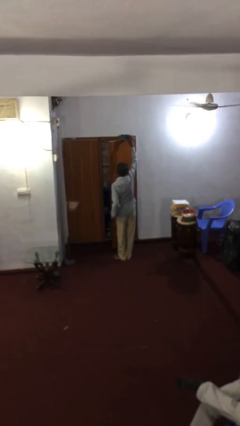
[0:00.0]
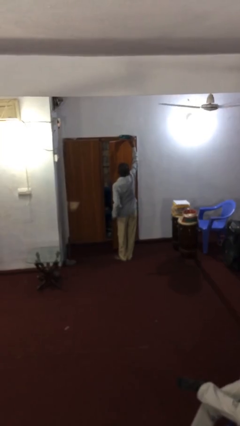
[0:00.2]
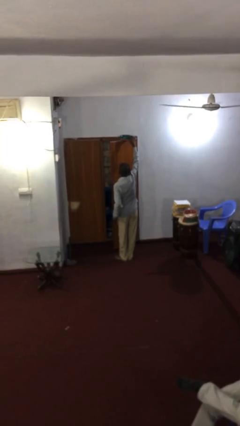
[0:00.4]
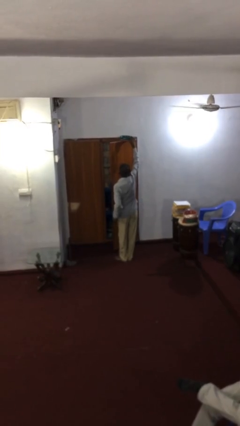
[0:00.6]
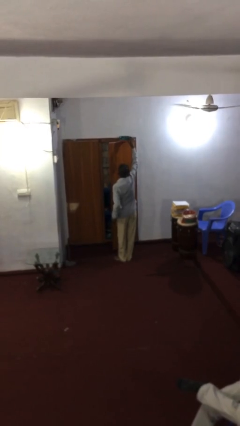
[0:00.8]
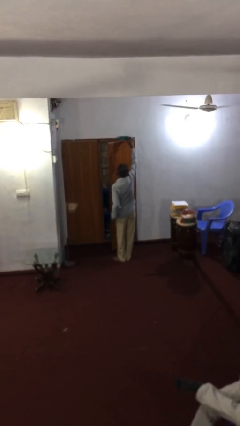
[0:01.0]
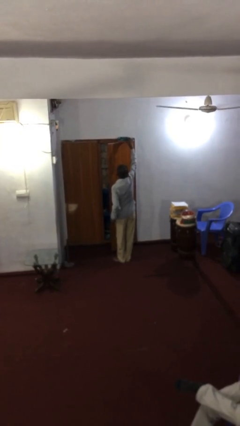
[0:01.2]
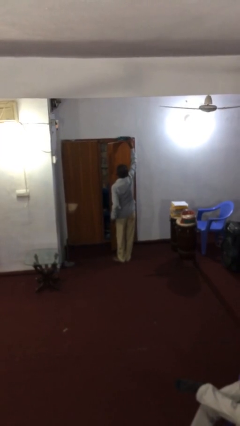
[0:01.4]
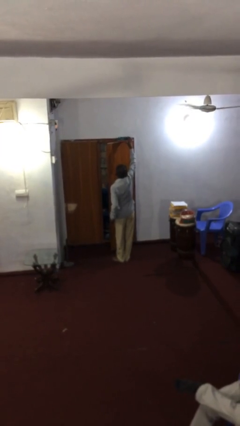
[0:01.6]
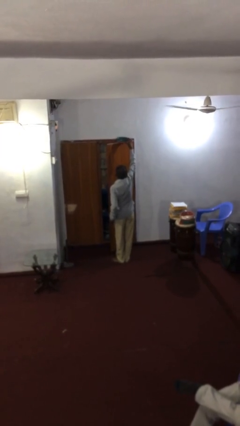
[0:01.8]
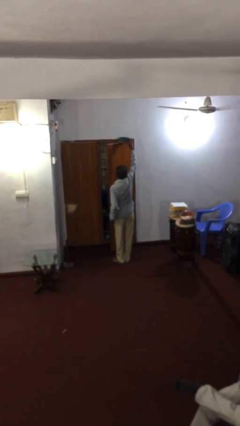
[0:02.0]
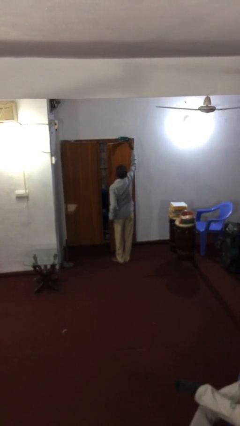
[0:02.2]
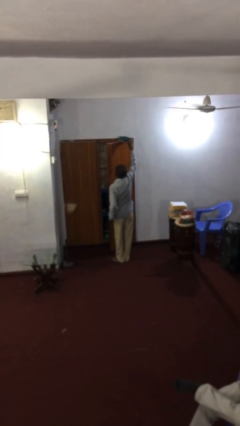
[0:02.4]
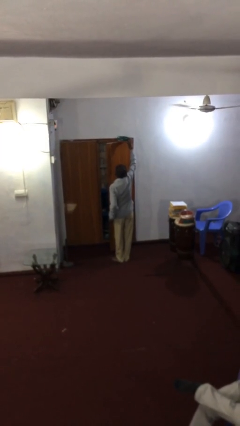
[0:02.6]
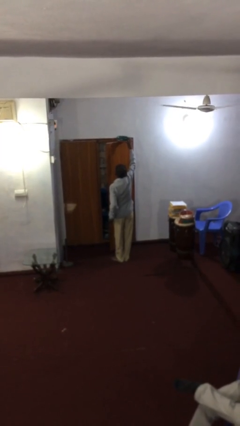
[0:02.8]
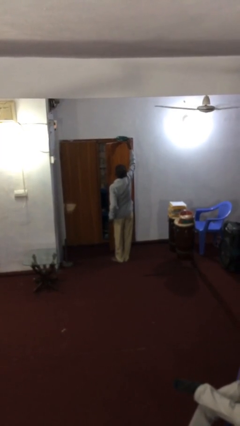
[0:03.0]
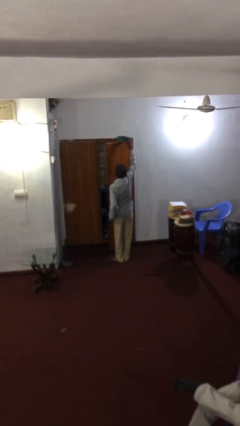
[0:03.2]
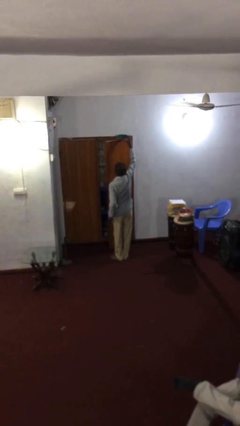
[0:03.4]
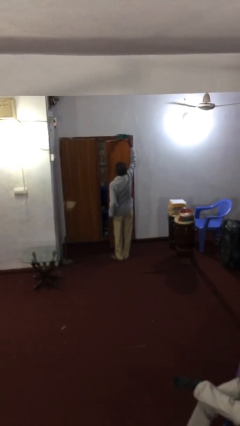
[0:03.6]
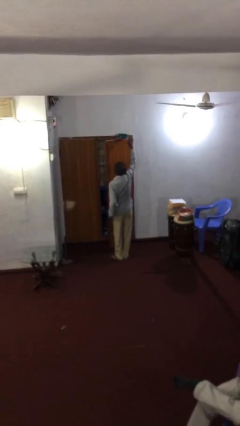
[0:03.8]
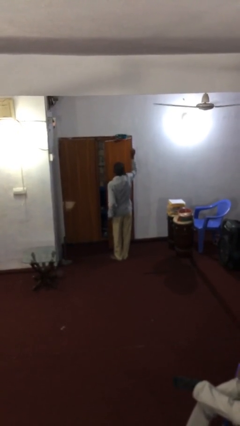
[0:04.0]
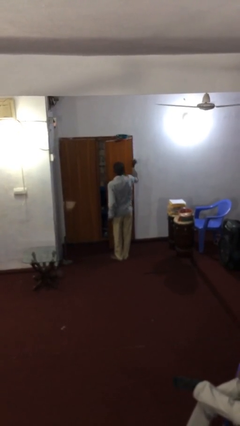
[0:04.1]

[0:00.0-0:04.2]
person puts down object on shelf

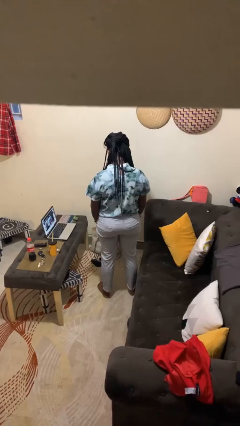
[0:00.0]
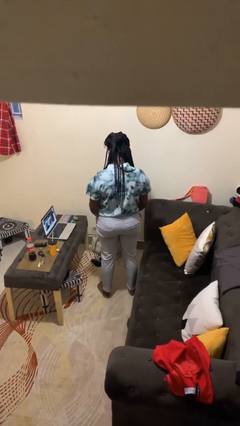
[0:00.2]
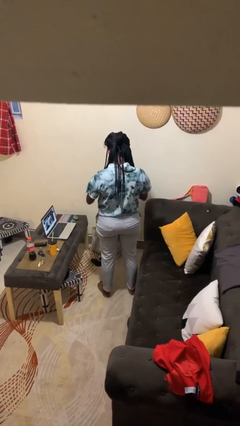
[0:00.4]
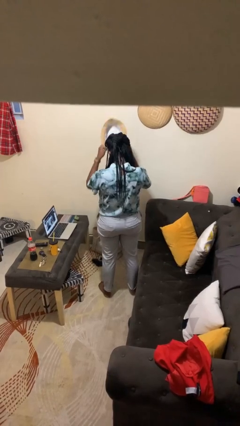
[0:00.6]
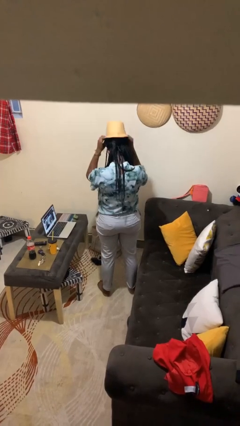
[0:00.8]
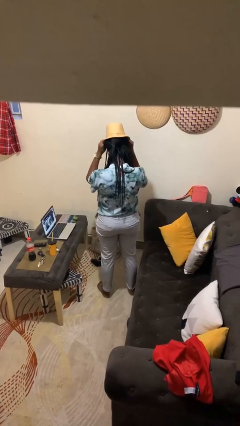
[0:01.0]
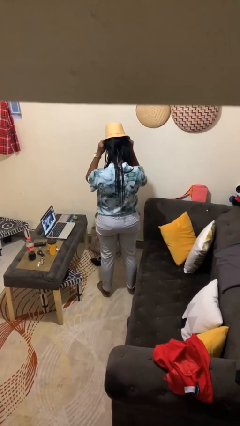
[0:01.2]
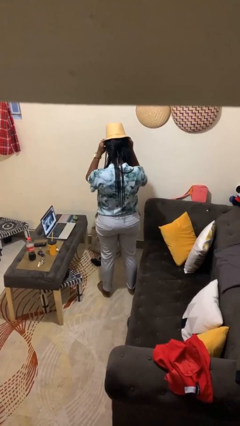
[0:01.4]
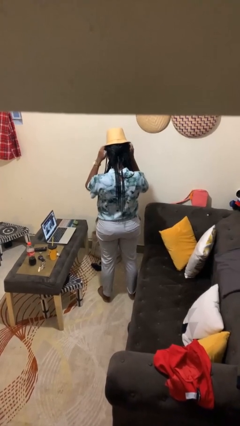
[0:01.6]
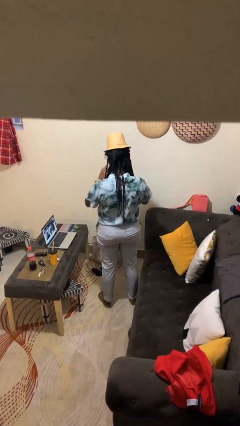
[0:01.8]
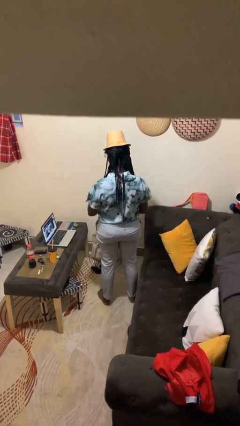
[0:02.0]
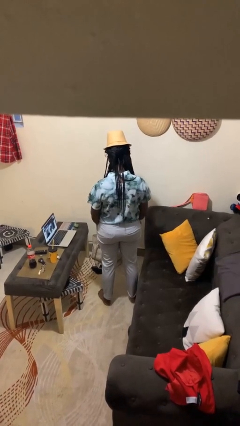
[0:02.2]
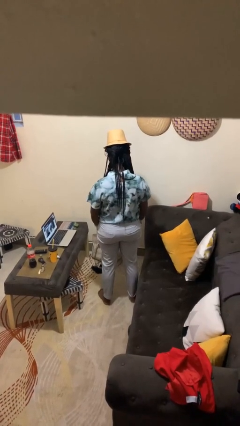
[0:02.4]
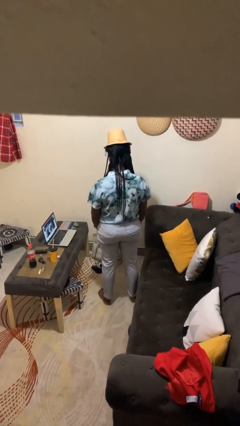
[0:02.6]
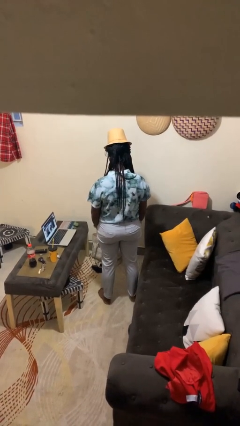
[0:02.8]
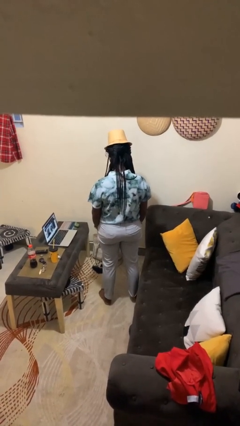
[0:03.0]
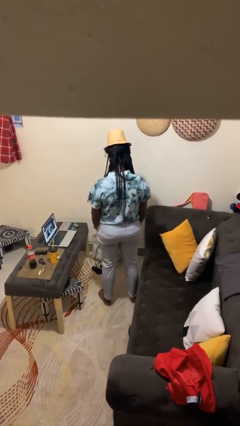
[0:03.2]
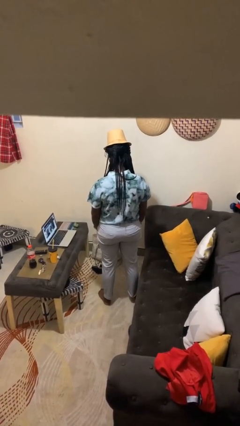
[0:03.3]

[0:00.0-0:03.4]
person puts on hat

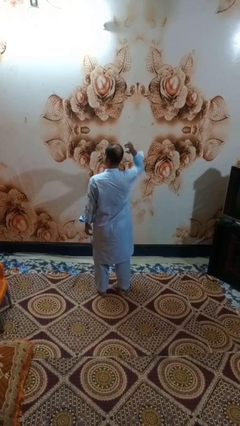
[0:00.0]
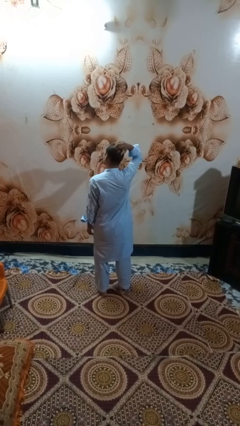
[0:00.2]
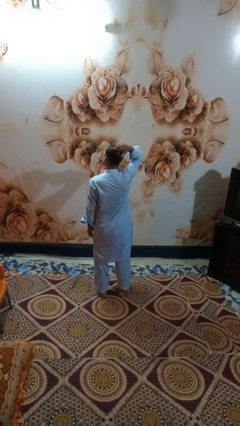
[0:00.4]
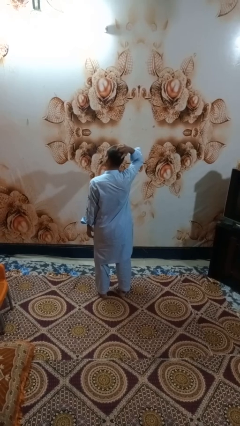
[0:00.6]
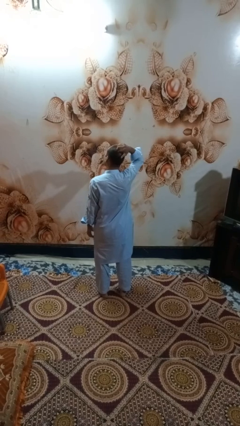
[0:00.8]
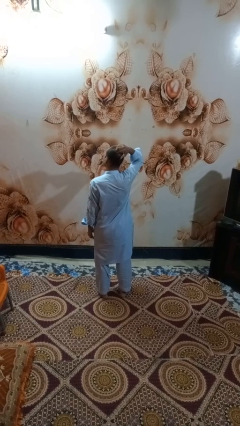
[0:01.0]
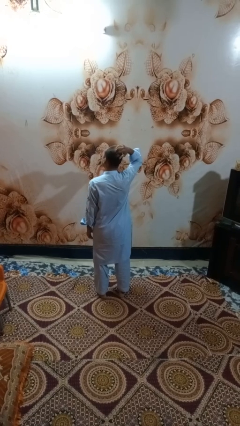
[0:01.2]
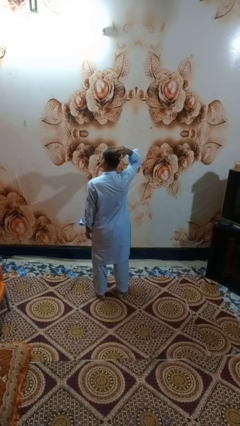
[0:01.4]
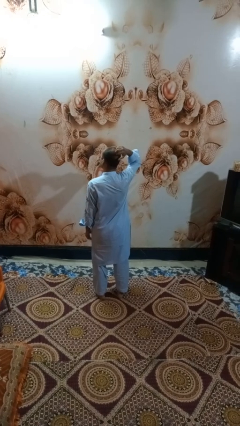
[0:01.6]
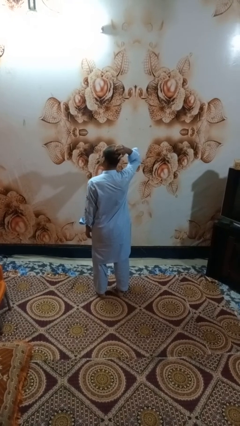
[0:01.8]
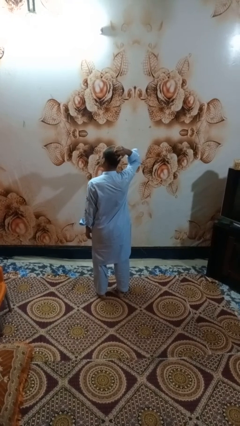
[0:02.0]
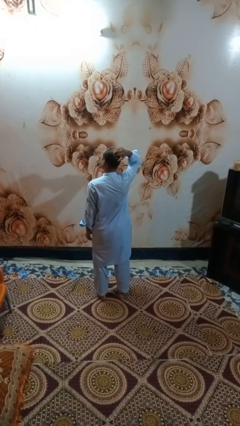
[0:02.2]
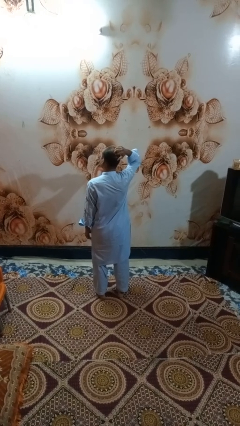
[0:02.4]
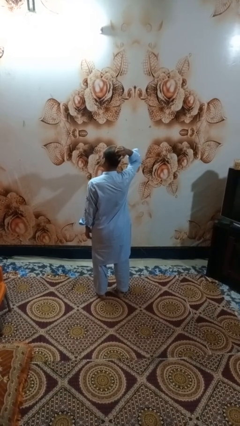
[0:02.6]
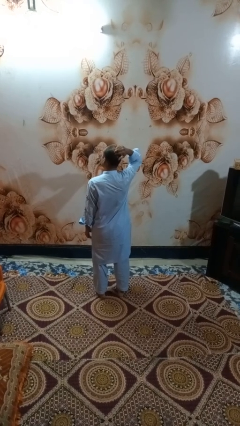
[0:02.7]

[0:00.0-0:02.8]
person scratches face

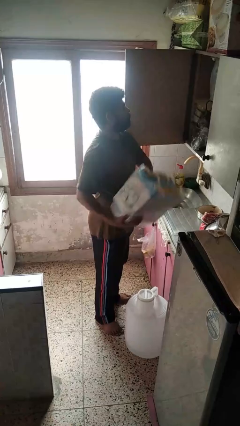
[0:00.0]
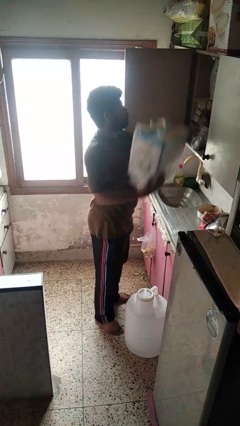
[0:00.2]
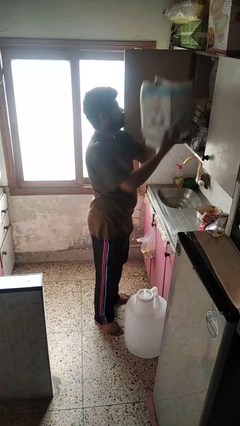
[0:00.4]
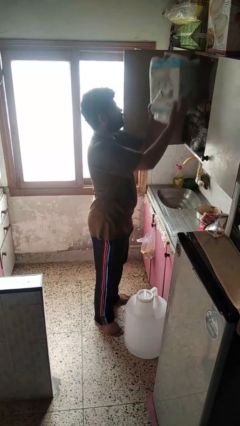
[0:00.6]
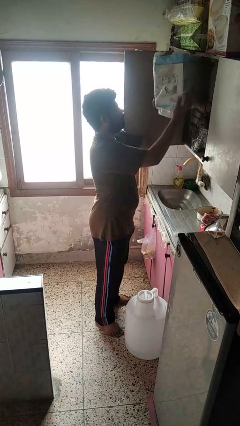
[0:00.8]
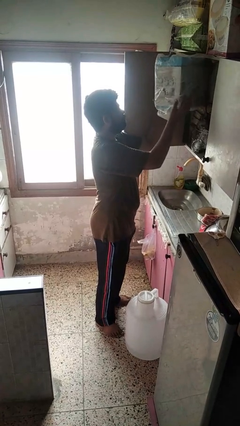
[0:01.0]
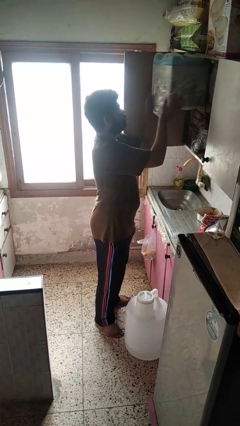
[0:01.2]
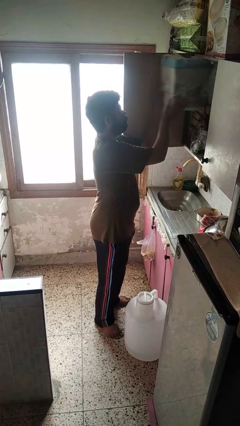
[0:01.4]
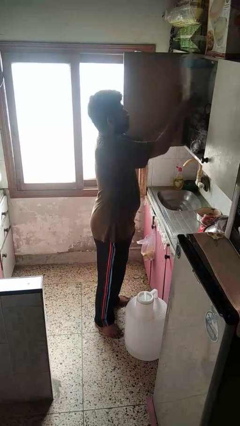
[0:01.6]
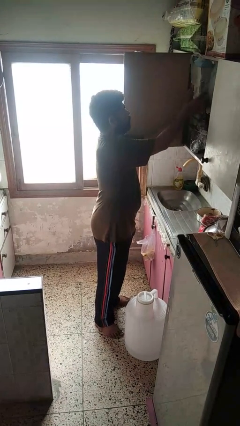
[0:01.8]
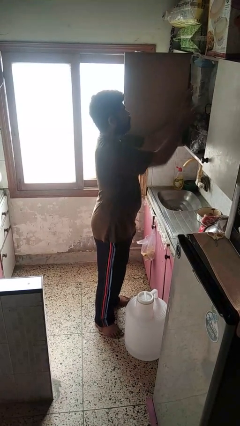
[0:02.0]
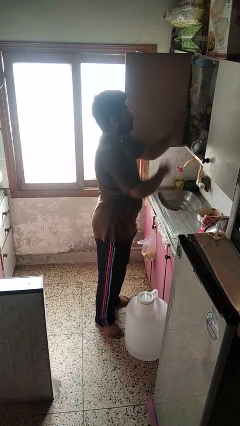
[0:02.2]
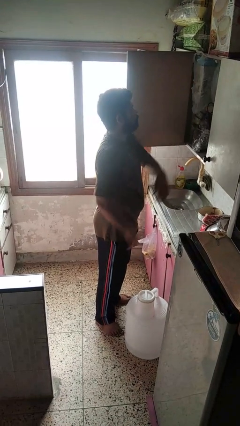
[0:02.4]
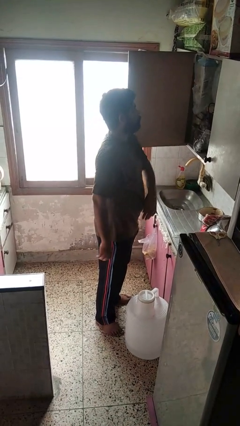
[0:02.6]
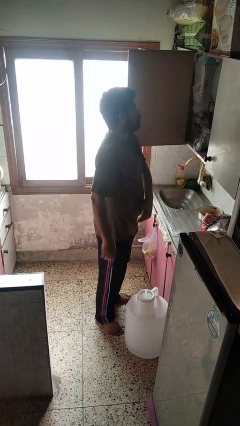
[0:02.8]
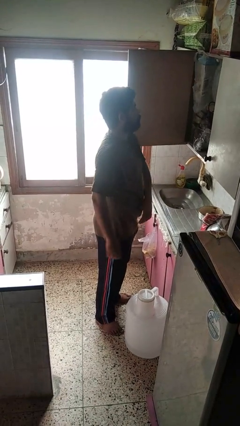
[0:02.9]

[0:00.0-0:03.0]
person puts down object into cabinet

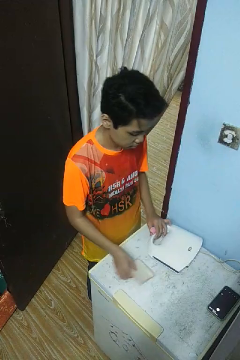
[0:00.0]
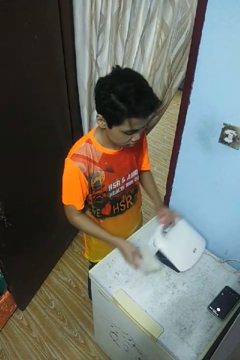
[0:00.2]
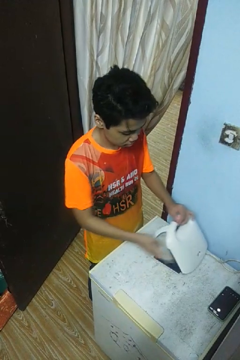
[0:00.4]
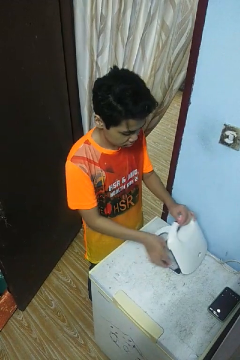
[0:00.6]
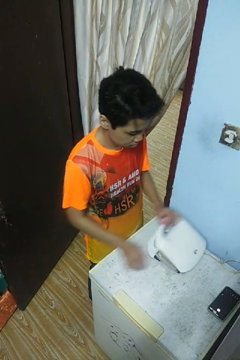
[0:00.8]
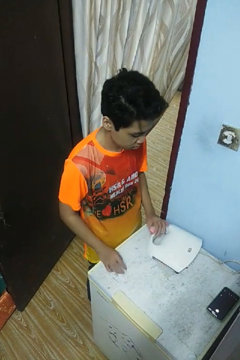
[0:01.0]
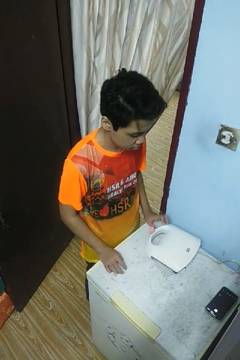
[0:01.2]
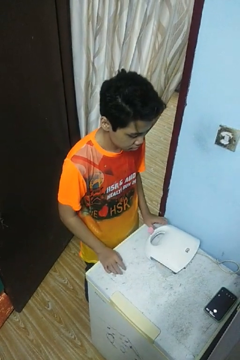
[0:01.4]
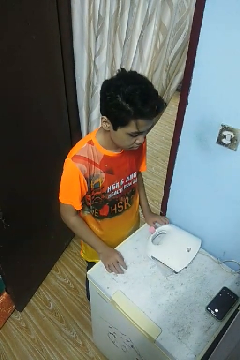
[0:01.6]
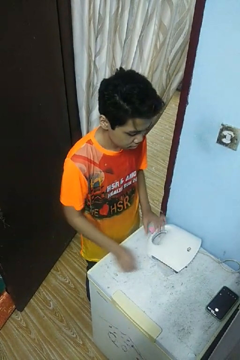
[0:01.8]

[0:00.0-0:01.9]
person puts object into toaster

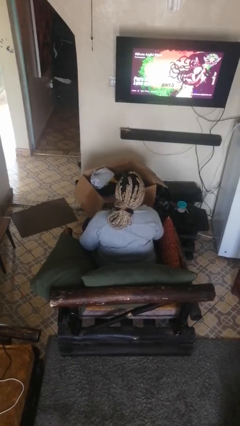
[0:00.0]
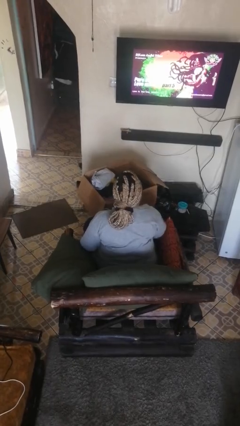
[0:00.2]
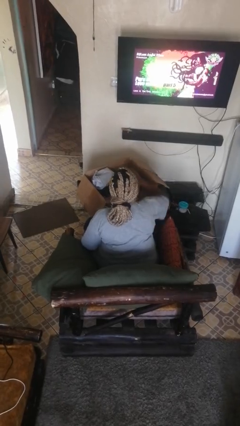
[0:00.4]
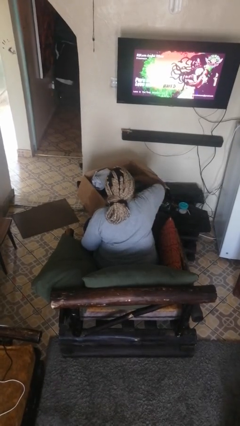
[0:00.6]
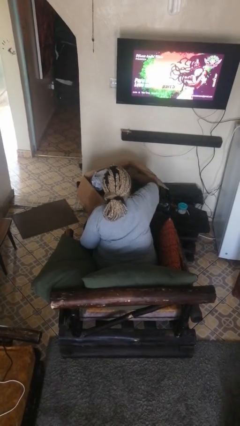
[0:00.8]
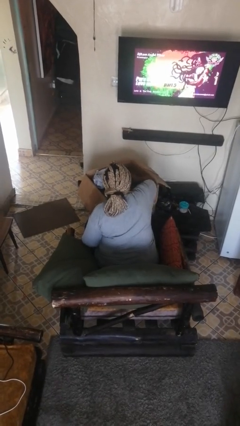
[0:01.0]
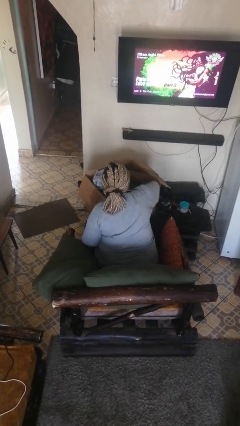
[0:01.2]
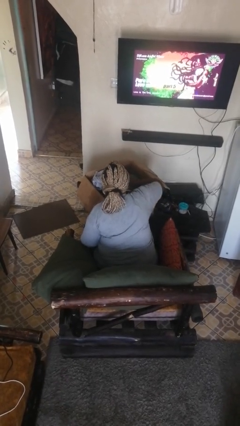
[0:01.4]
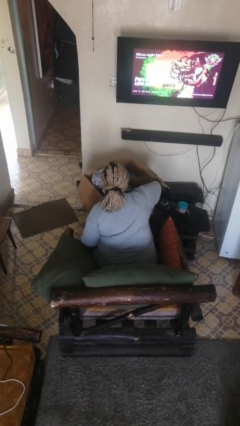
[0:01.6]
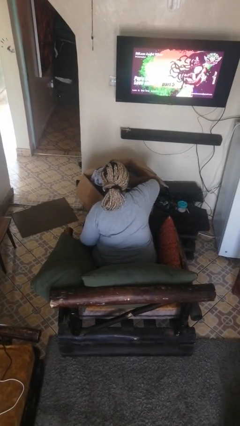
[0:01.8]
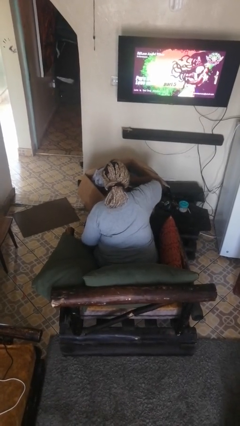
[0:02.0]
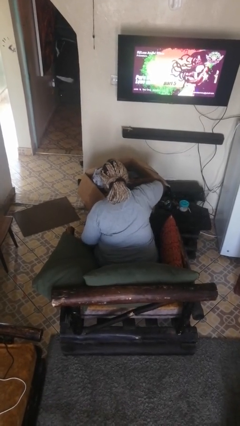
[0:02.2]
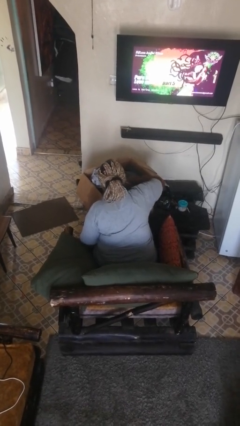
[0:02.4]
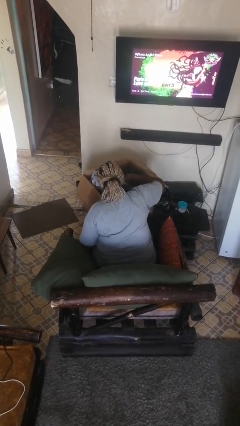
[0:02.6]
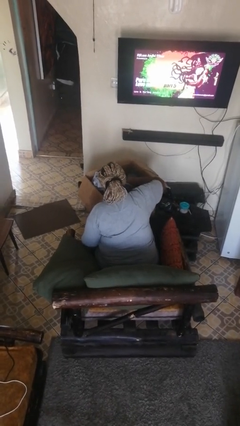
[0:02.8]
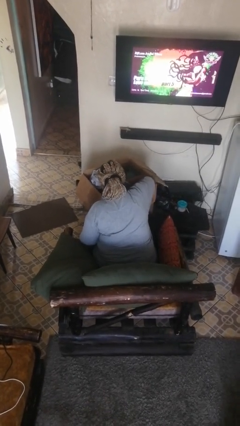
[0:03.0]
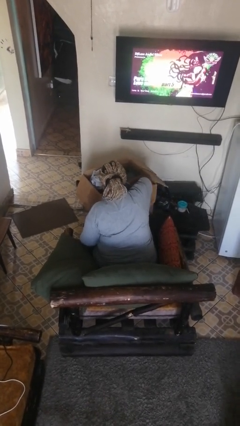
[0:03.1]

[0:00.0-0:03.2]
person searches in box
